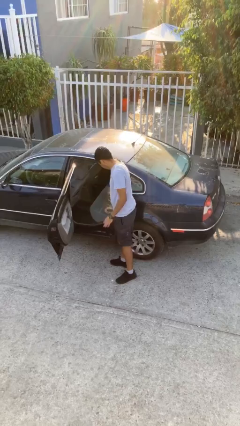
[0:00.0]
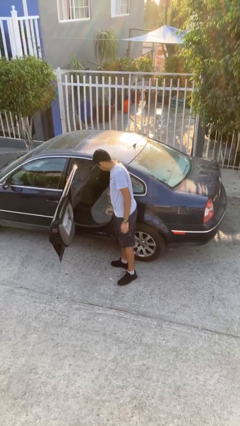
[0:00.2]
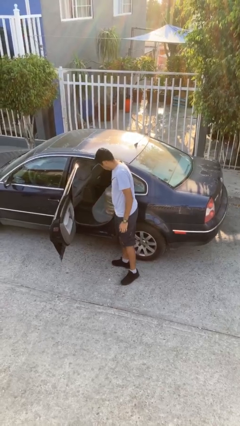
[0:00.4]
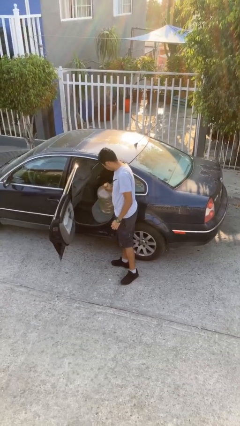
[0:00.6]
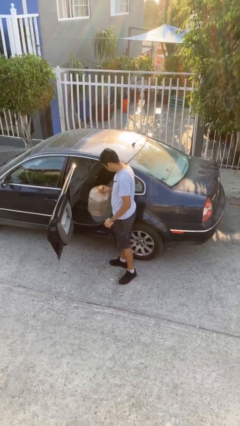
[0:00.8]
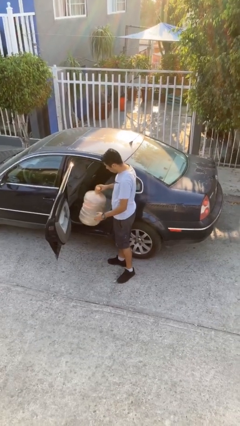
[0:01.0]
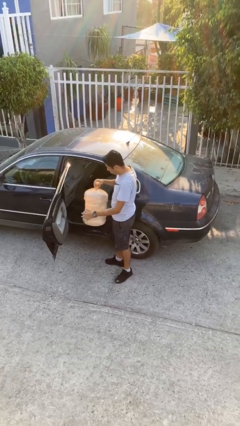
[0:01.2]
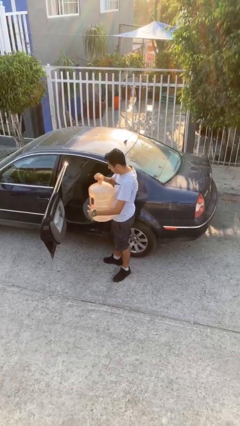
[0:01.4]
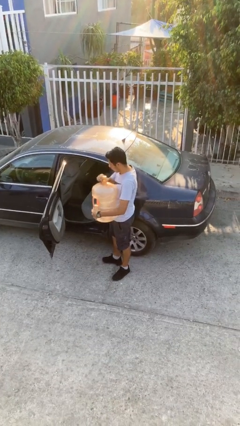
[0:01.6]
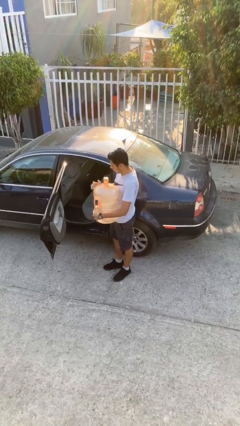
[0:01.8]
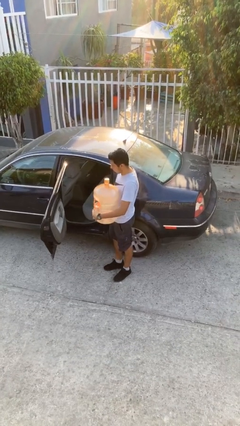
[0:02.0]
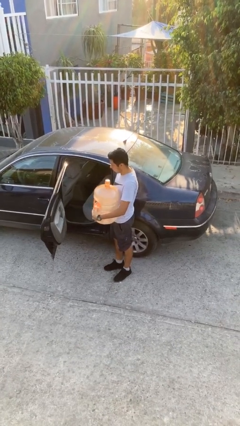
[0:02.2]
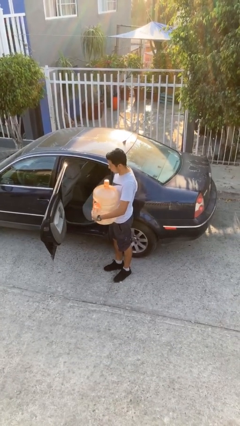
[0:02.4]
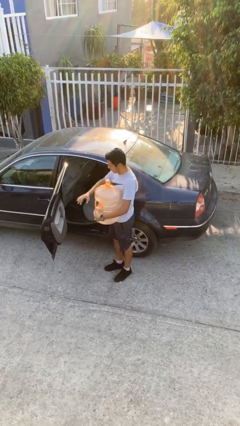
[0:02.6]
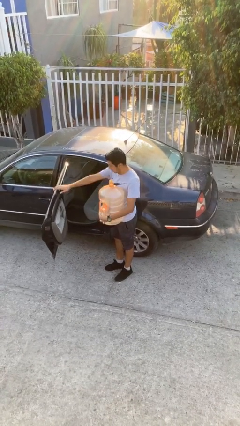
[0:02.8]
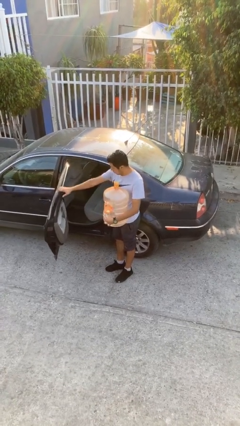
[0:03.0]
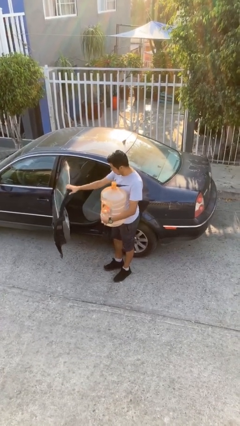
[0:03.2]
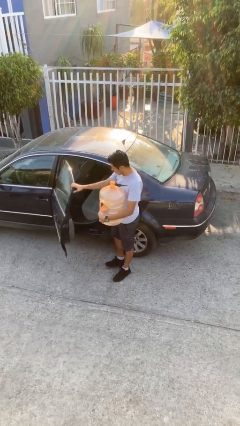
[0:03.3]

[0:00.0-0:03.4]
person unloads car

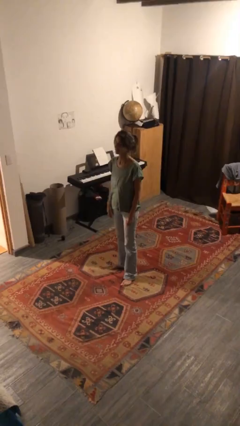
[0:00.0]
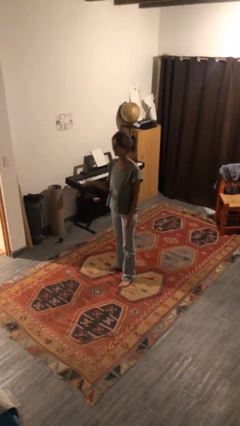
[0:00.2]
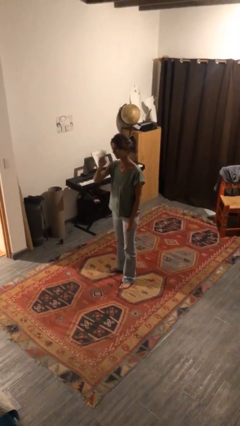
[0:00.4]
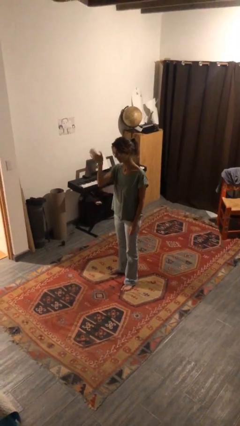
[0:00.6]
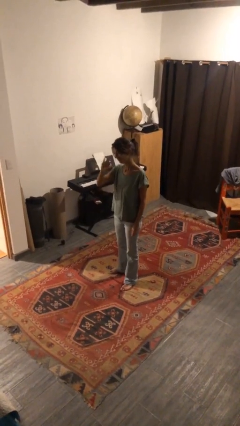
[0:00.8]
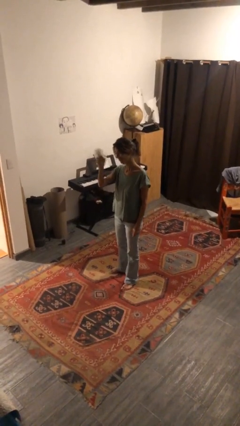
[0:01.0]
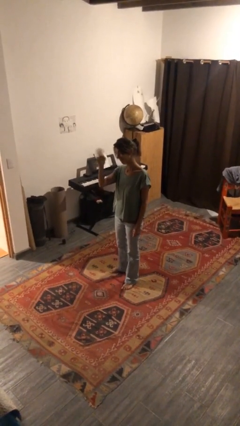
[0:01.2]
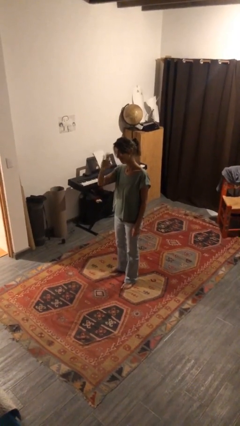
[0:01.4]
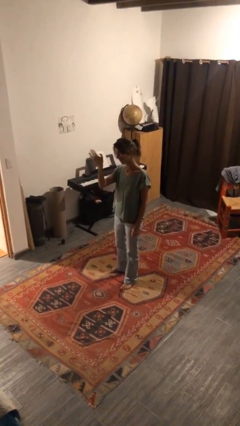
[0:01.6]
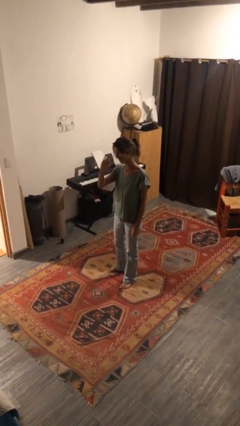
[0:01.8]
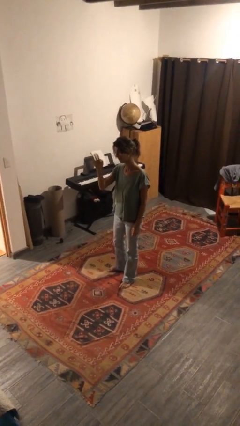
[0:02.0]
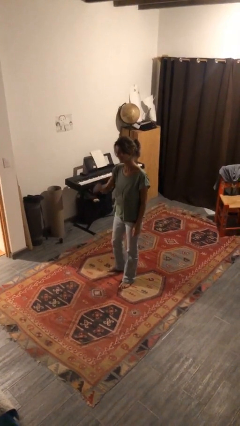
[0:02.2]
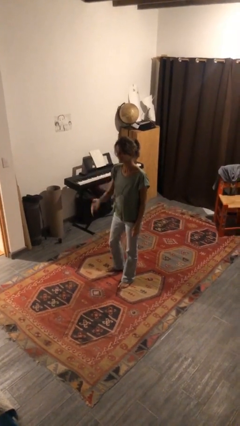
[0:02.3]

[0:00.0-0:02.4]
person waves at person

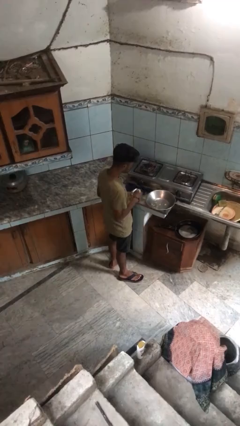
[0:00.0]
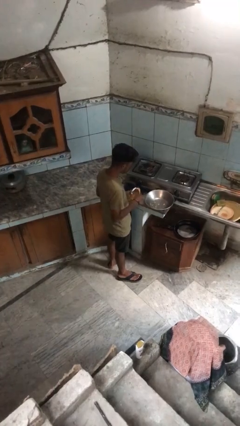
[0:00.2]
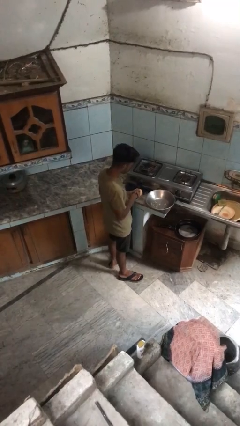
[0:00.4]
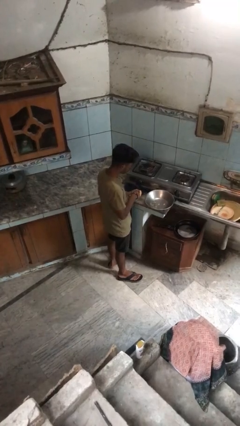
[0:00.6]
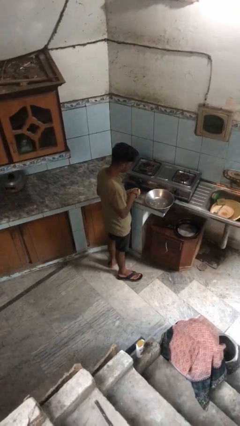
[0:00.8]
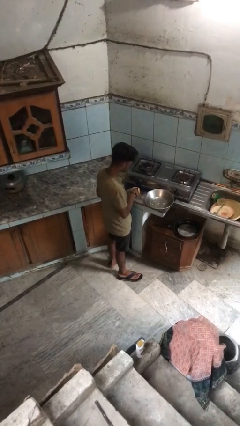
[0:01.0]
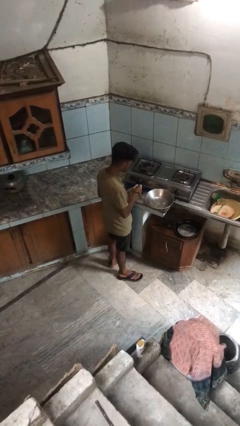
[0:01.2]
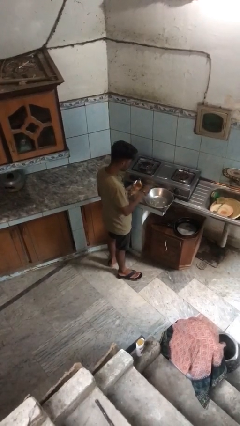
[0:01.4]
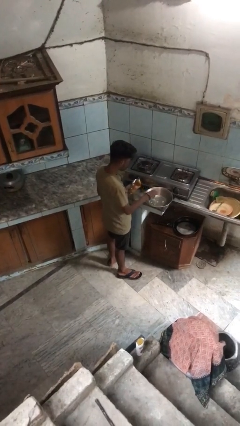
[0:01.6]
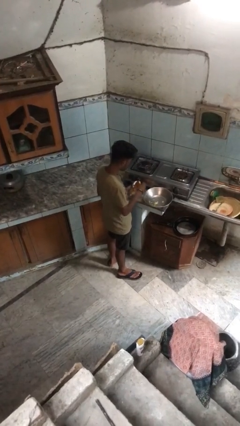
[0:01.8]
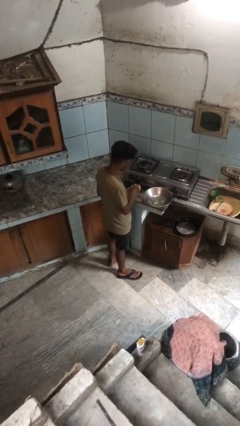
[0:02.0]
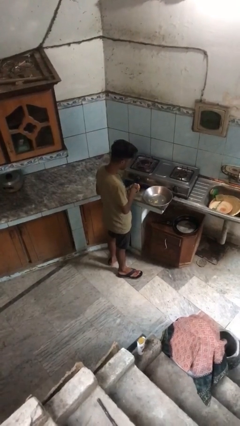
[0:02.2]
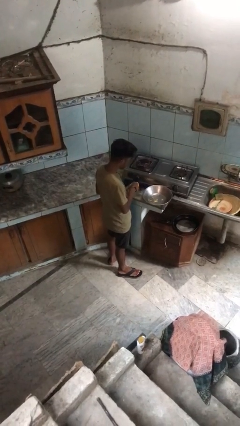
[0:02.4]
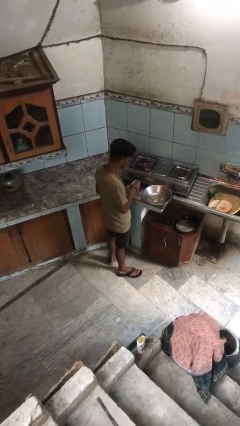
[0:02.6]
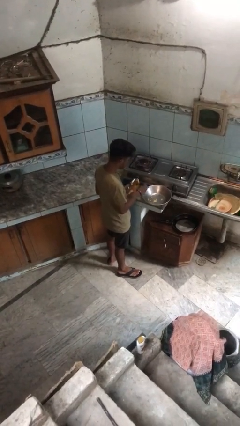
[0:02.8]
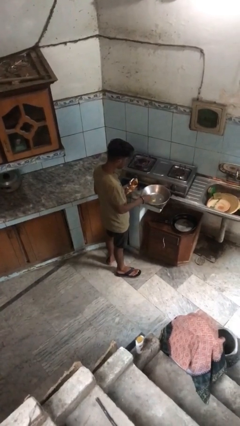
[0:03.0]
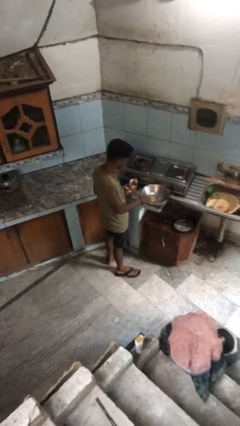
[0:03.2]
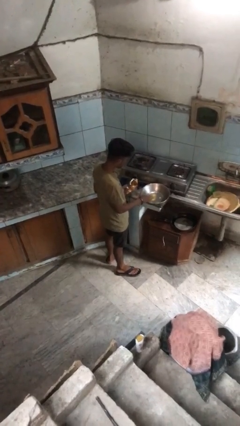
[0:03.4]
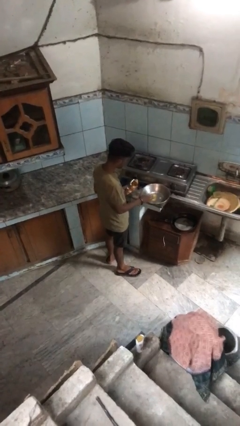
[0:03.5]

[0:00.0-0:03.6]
person pours into bowl

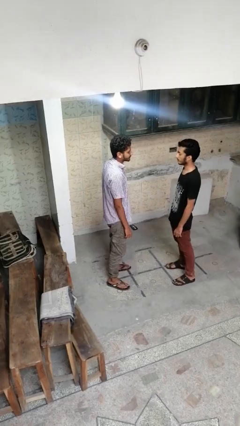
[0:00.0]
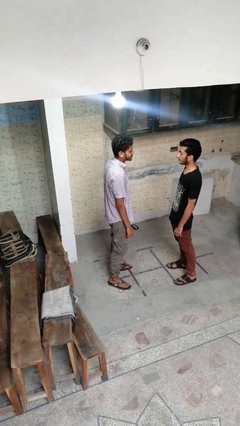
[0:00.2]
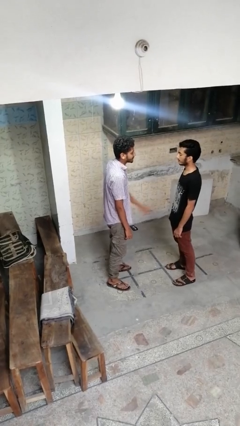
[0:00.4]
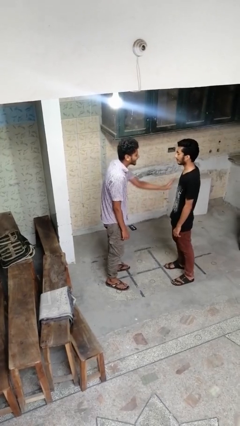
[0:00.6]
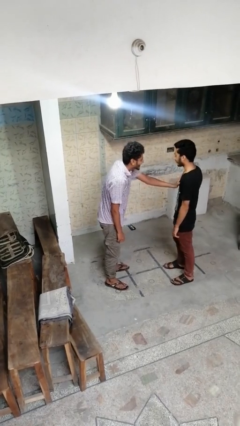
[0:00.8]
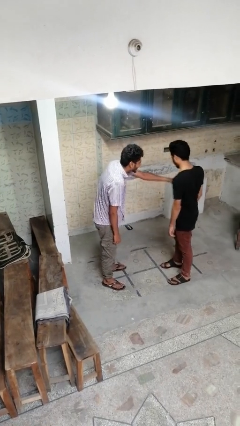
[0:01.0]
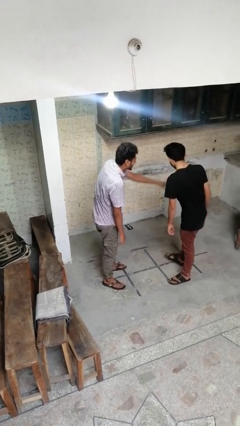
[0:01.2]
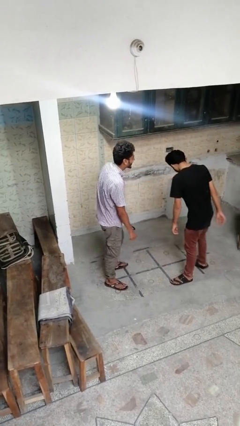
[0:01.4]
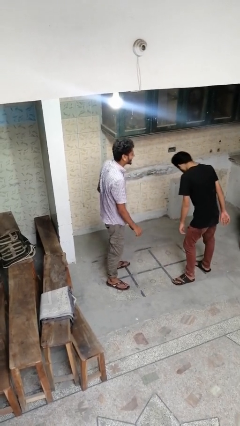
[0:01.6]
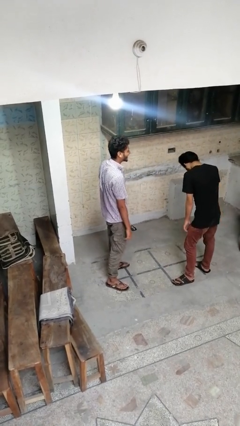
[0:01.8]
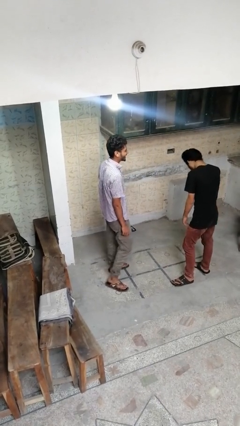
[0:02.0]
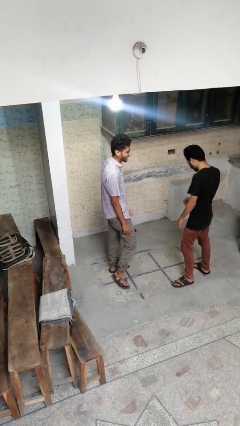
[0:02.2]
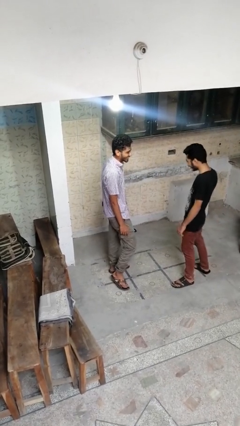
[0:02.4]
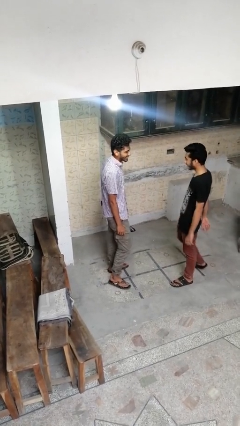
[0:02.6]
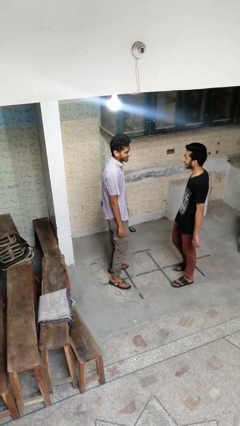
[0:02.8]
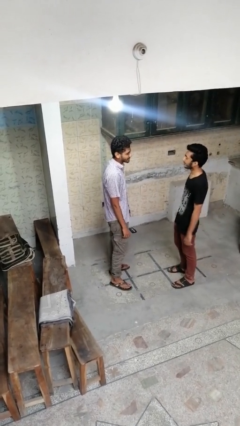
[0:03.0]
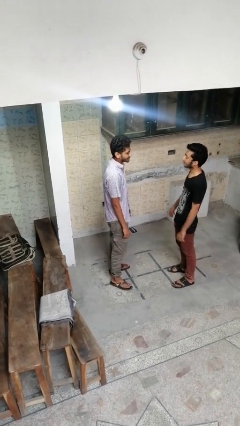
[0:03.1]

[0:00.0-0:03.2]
person shoves person

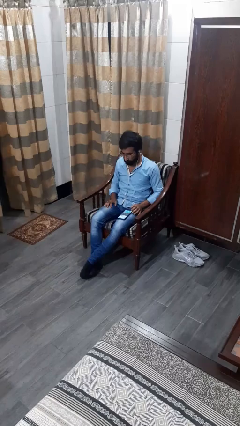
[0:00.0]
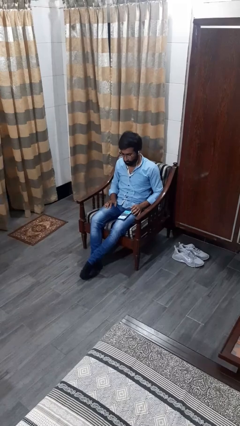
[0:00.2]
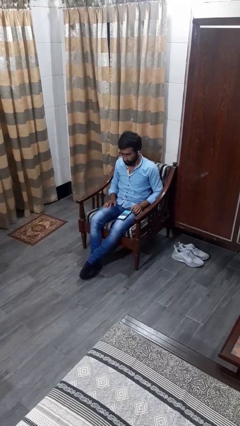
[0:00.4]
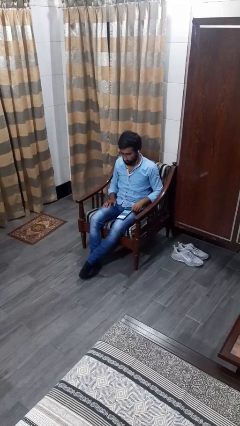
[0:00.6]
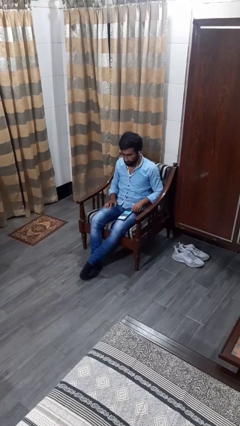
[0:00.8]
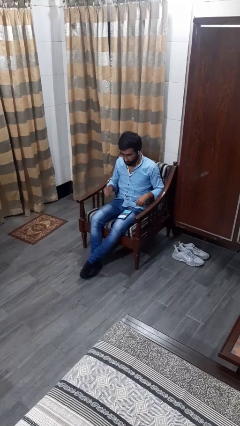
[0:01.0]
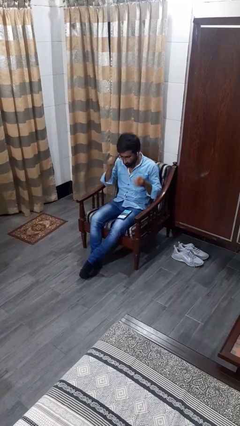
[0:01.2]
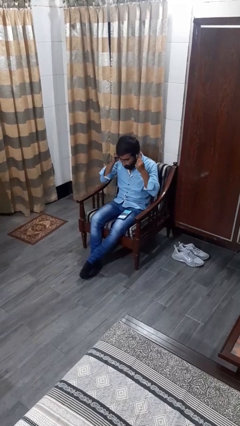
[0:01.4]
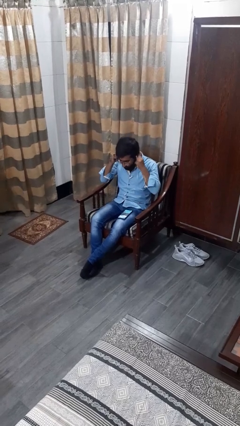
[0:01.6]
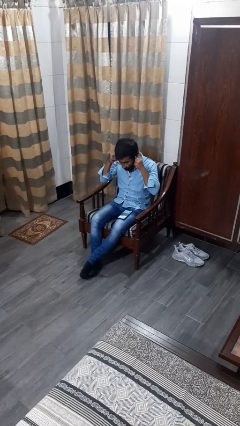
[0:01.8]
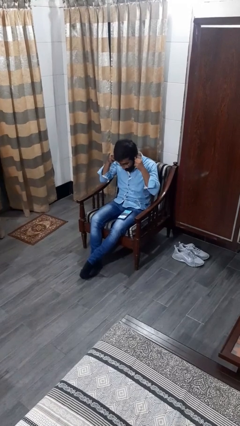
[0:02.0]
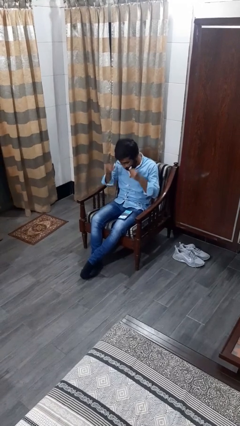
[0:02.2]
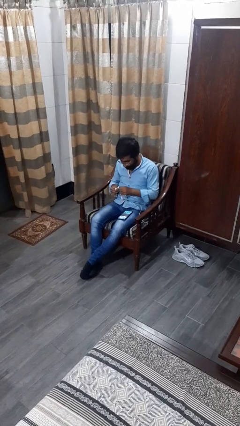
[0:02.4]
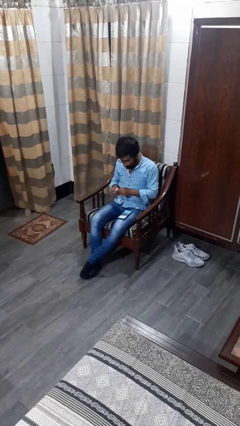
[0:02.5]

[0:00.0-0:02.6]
person takes off headphones

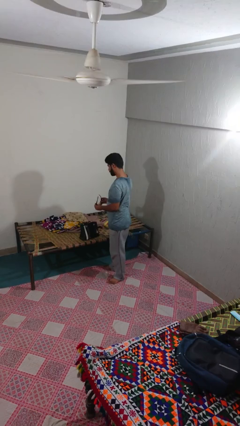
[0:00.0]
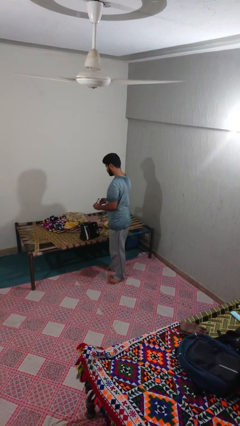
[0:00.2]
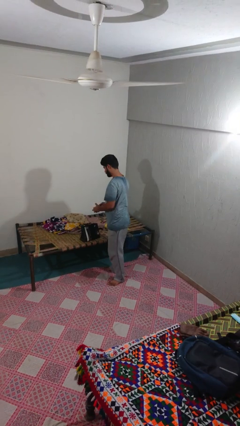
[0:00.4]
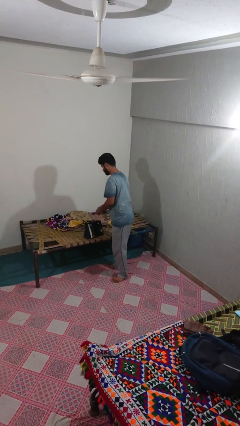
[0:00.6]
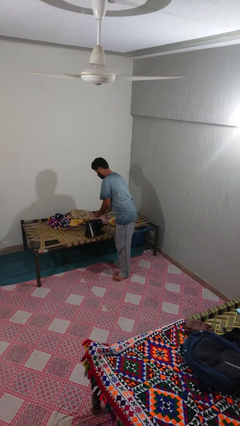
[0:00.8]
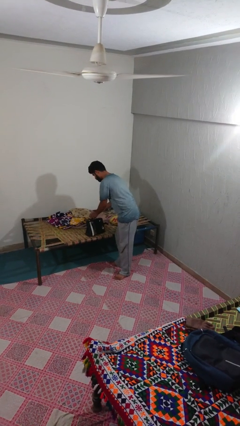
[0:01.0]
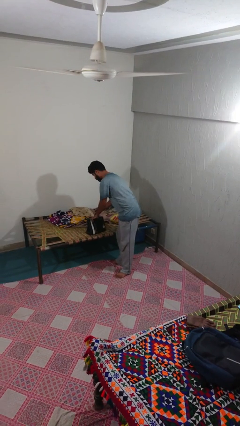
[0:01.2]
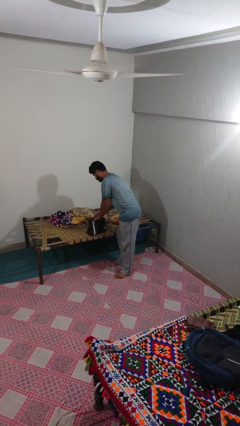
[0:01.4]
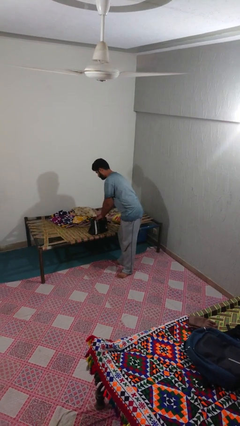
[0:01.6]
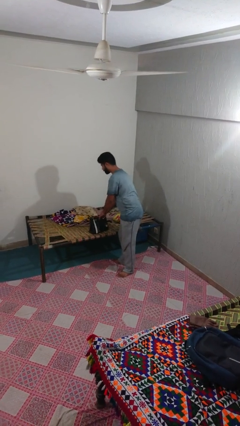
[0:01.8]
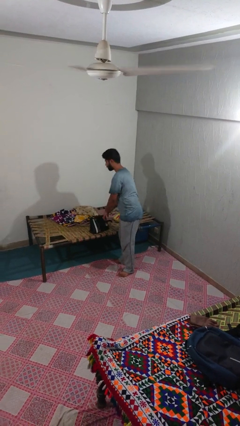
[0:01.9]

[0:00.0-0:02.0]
person puts object into purse
